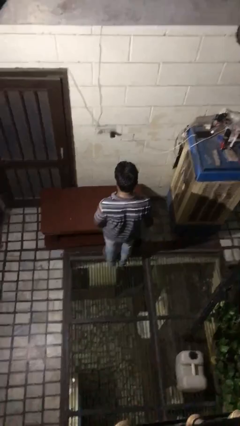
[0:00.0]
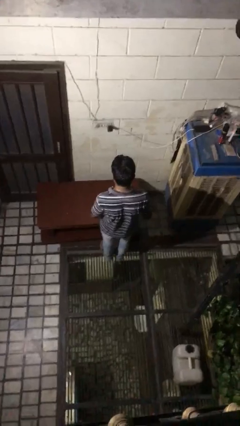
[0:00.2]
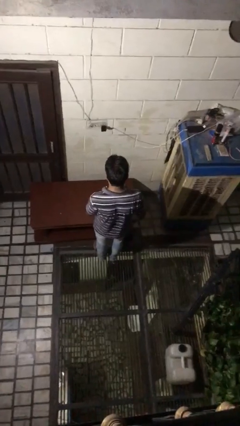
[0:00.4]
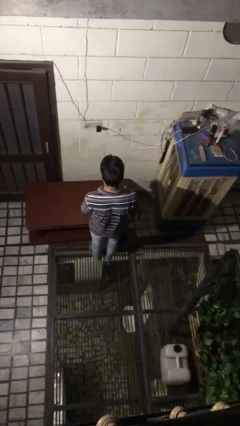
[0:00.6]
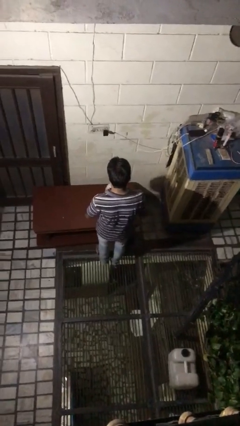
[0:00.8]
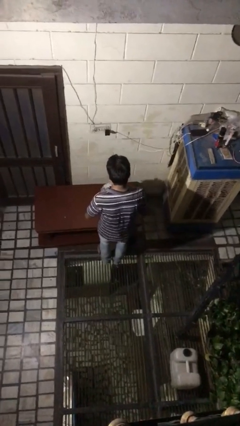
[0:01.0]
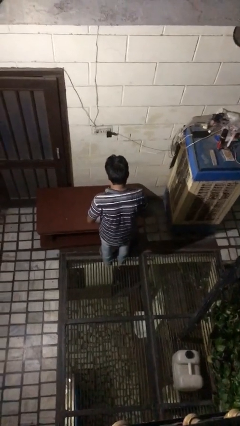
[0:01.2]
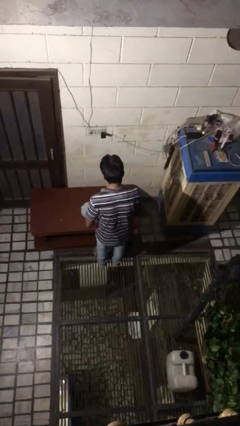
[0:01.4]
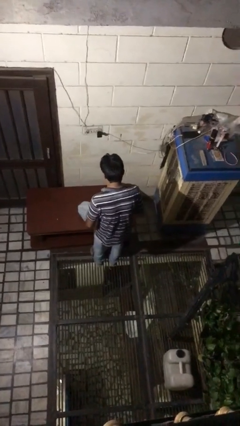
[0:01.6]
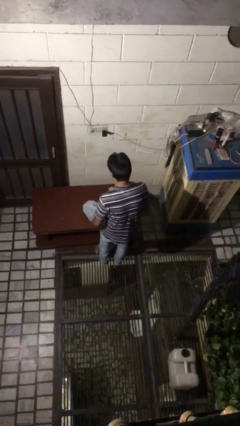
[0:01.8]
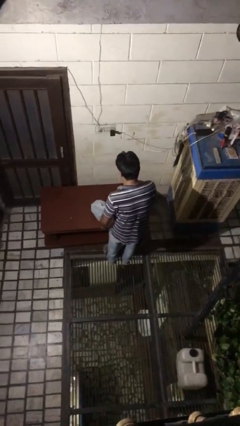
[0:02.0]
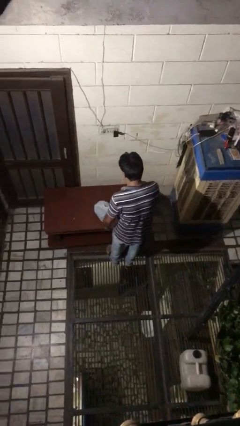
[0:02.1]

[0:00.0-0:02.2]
person throws object on table

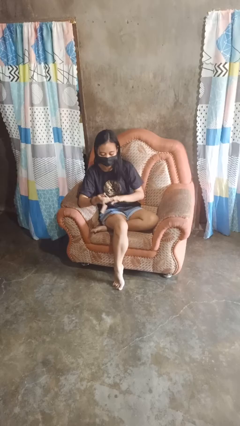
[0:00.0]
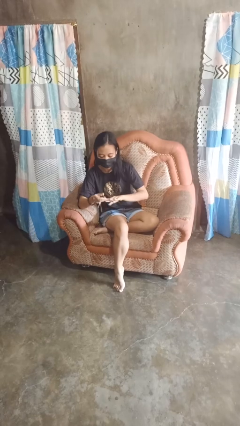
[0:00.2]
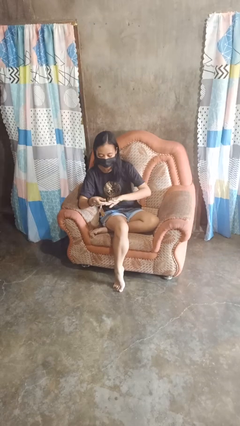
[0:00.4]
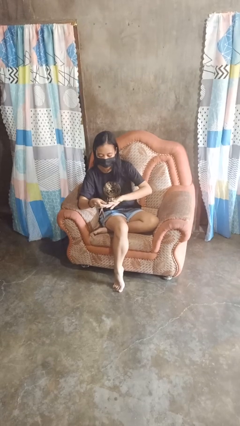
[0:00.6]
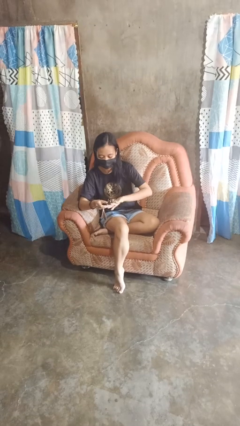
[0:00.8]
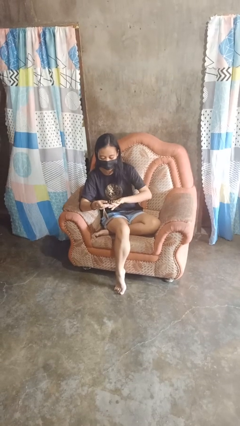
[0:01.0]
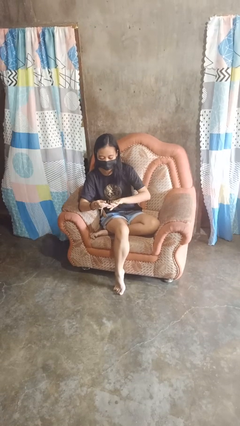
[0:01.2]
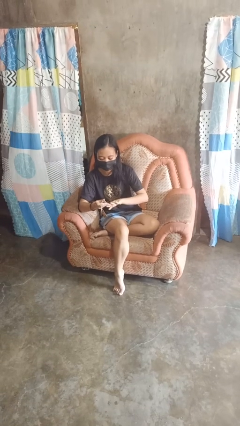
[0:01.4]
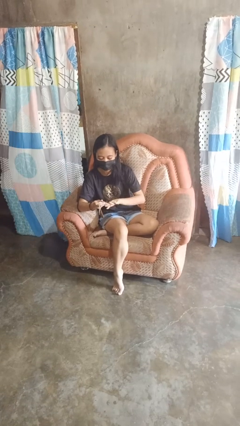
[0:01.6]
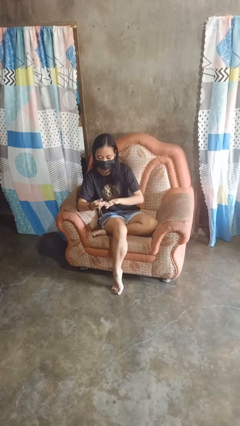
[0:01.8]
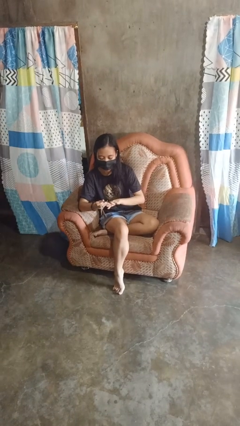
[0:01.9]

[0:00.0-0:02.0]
person clips fingernails

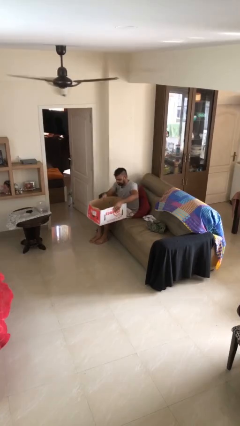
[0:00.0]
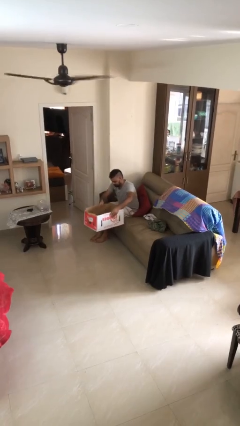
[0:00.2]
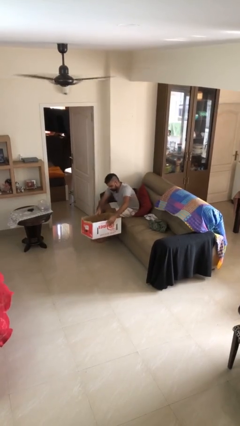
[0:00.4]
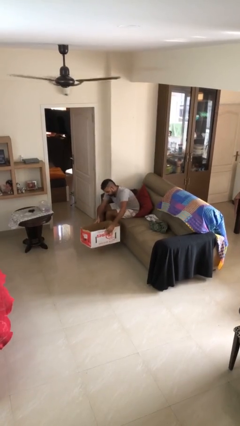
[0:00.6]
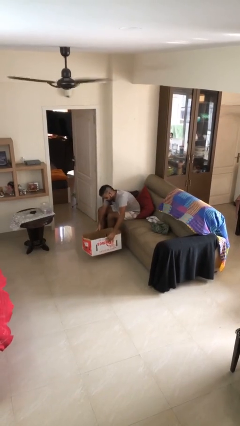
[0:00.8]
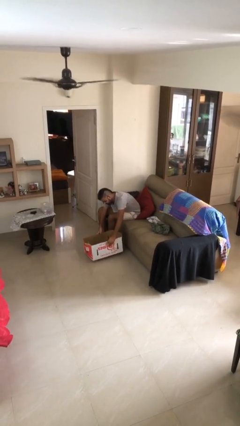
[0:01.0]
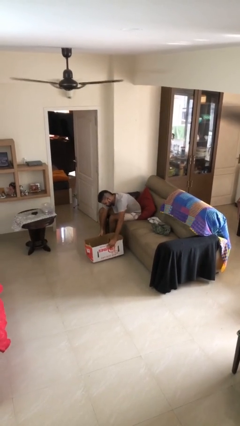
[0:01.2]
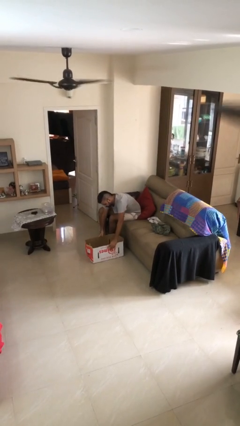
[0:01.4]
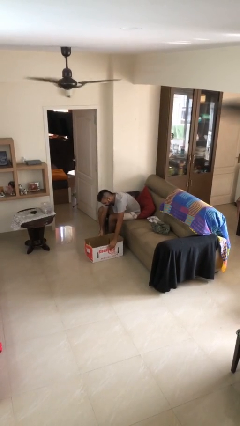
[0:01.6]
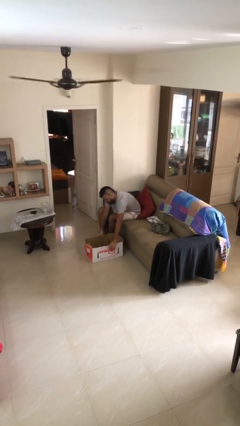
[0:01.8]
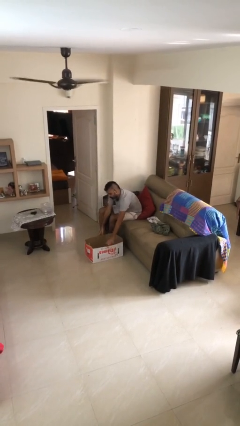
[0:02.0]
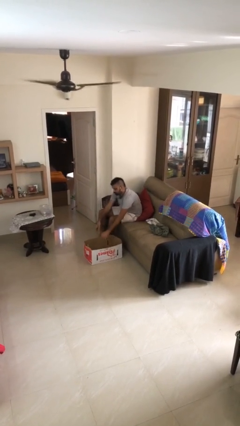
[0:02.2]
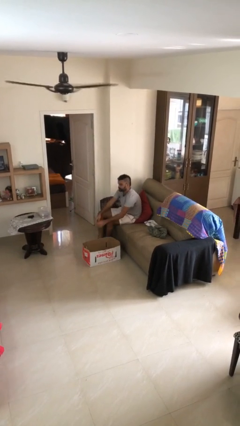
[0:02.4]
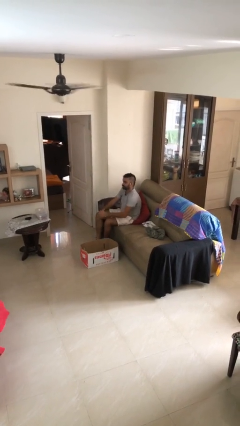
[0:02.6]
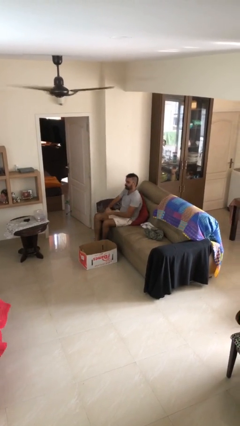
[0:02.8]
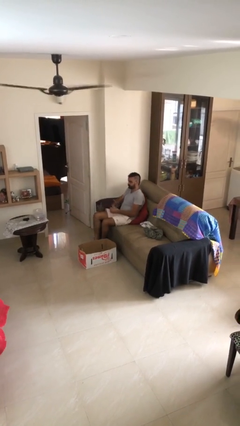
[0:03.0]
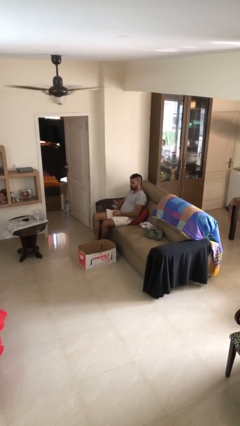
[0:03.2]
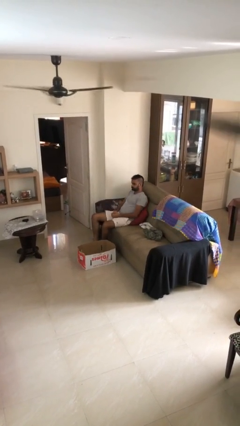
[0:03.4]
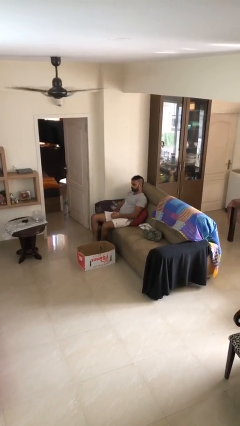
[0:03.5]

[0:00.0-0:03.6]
person puts down object on floor

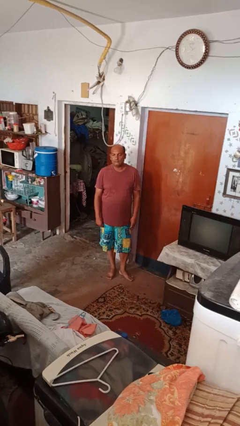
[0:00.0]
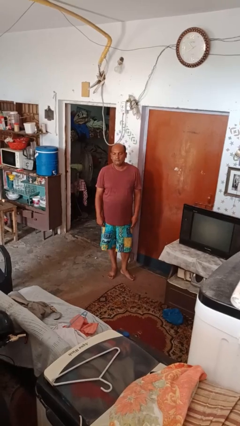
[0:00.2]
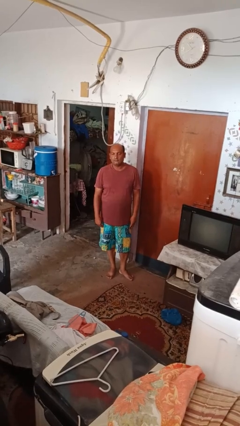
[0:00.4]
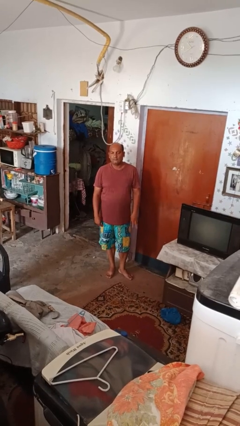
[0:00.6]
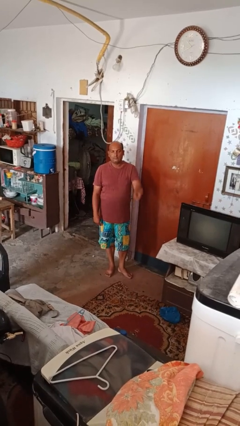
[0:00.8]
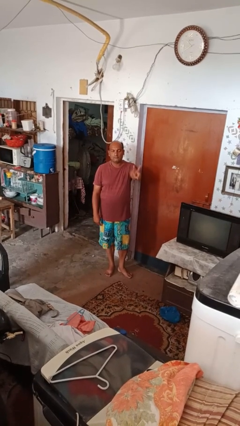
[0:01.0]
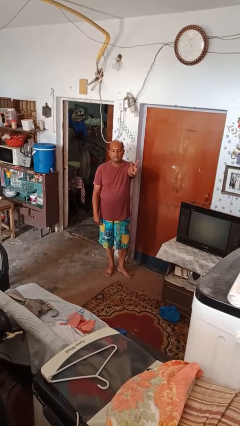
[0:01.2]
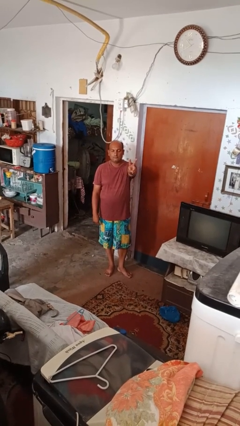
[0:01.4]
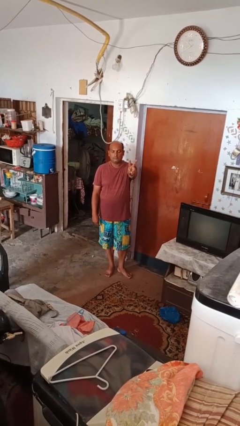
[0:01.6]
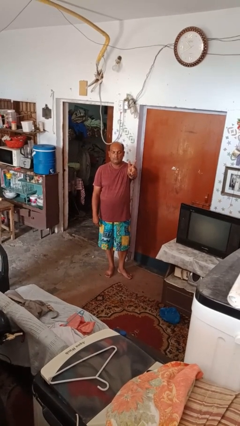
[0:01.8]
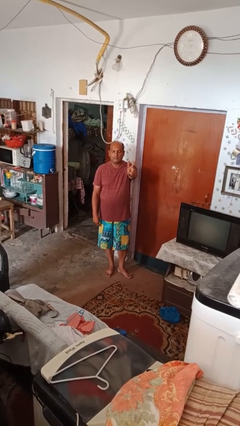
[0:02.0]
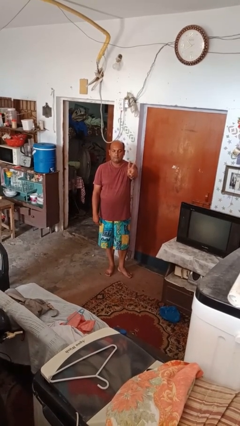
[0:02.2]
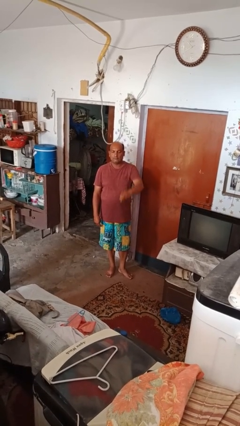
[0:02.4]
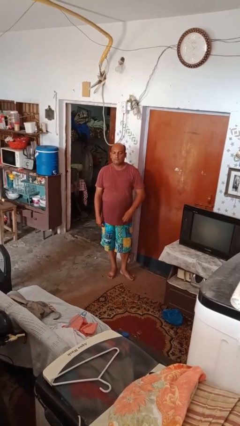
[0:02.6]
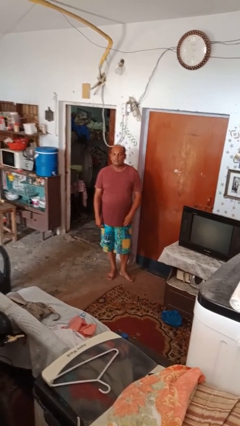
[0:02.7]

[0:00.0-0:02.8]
person gestures peace

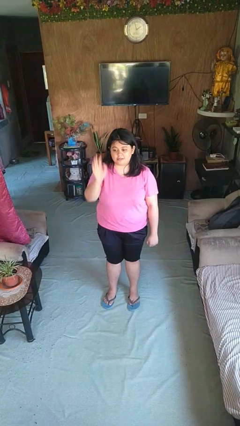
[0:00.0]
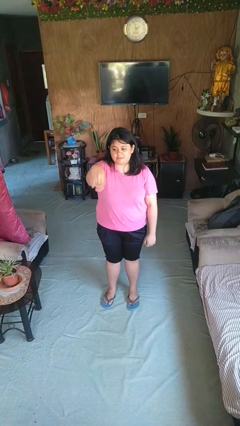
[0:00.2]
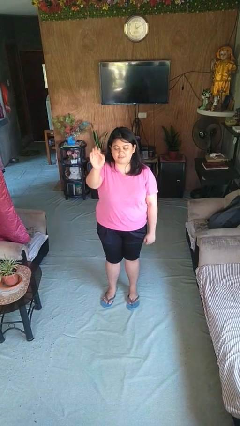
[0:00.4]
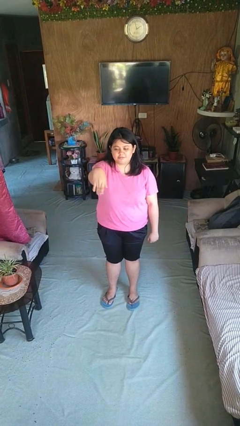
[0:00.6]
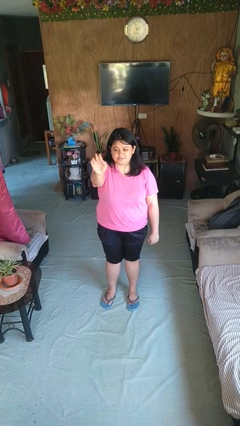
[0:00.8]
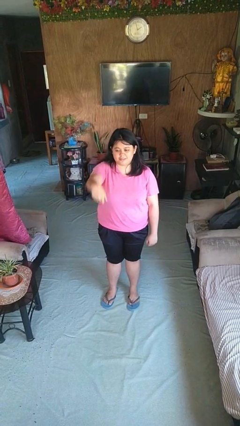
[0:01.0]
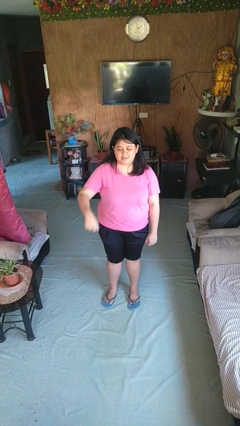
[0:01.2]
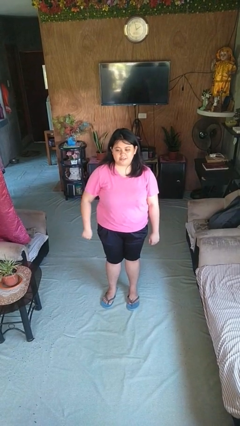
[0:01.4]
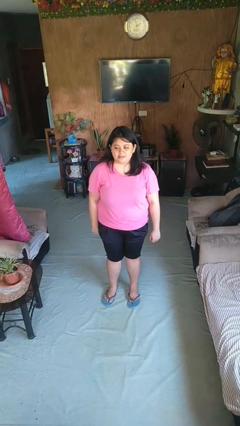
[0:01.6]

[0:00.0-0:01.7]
person gestures come here

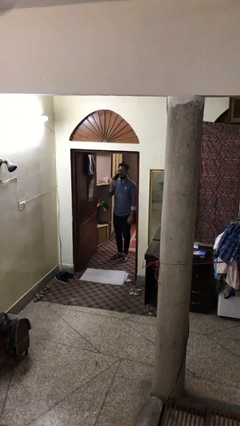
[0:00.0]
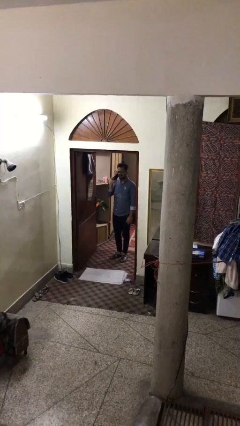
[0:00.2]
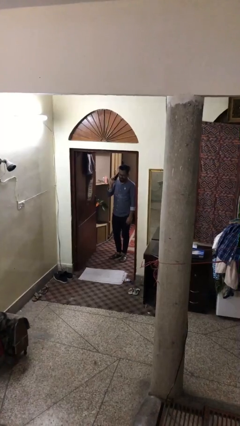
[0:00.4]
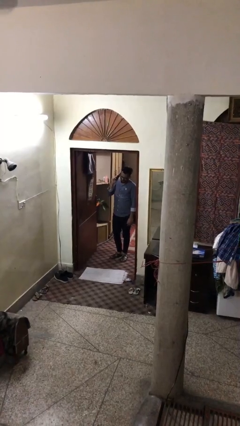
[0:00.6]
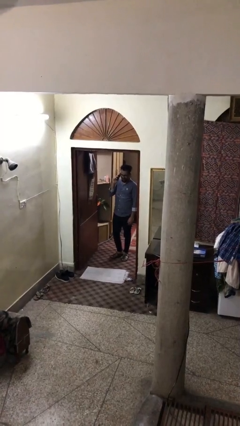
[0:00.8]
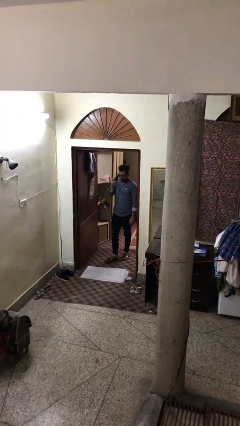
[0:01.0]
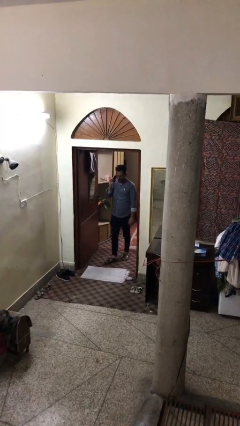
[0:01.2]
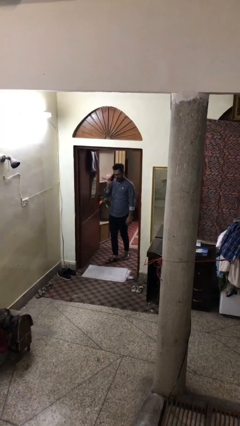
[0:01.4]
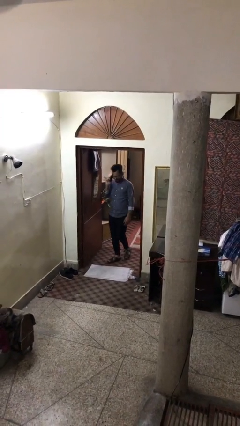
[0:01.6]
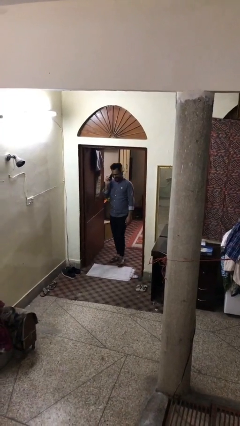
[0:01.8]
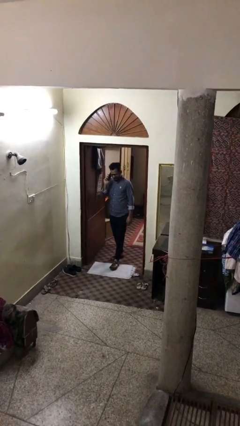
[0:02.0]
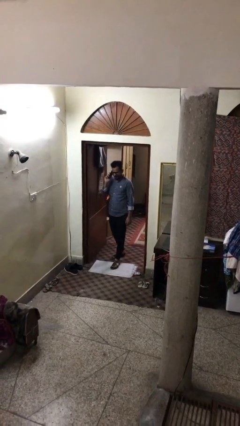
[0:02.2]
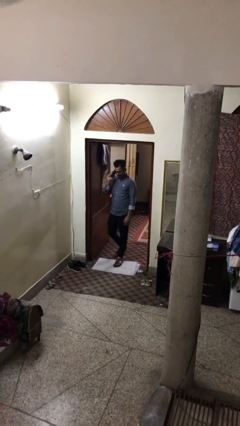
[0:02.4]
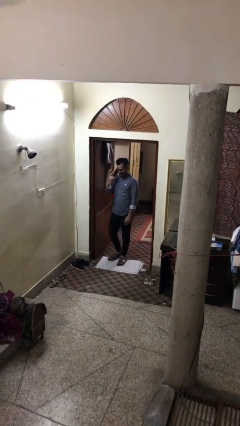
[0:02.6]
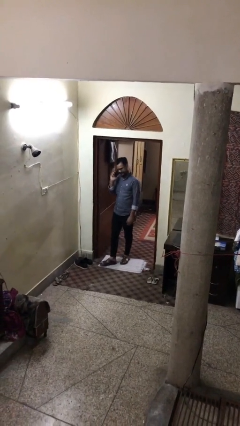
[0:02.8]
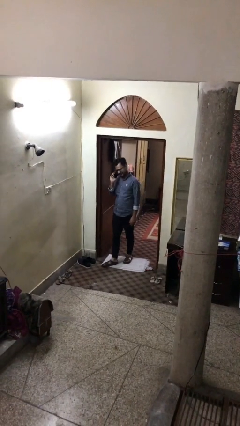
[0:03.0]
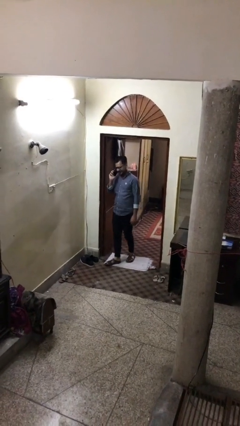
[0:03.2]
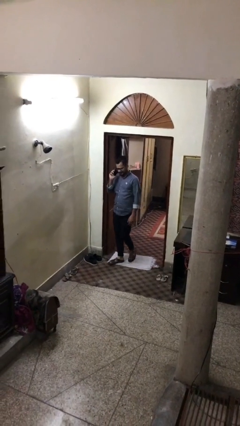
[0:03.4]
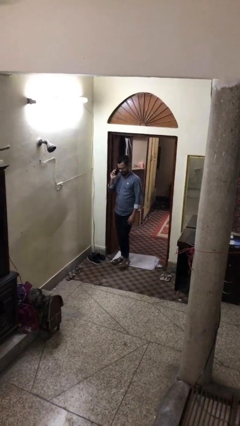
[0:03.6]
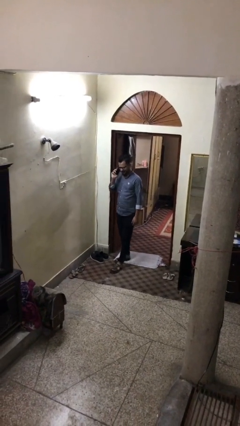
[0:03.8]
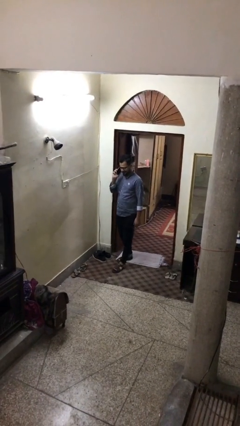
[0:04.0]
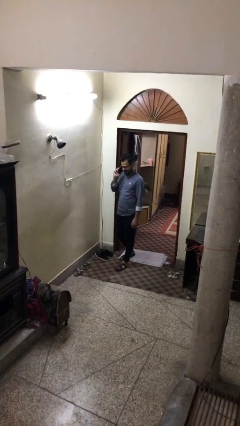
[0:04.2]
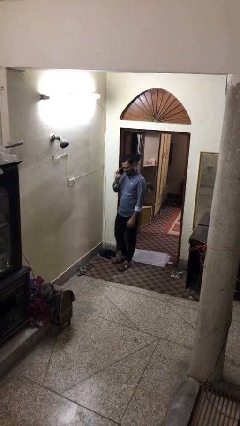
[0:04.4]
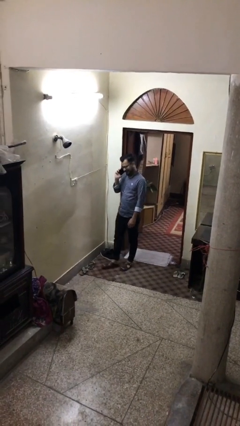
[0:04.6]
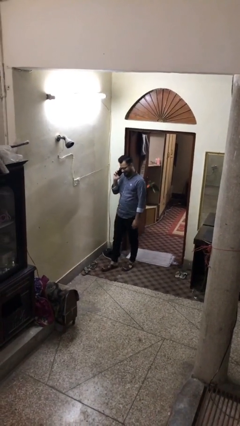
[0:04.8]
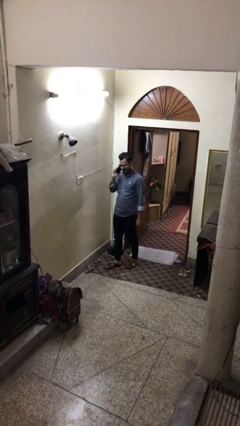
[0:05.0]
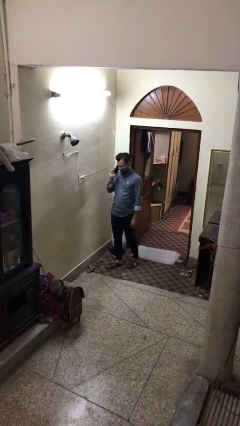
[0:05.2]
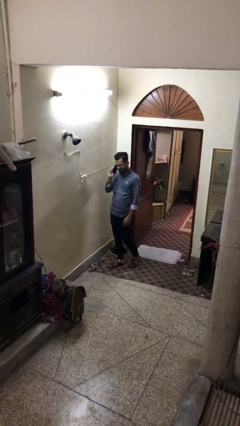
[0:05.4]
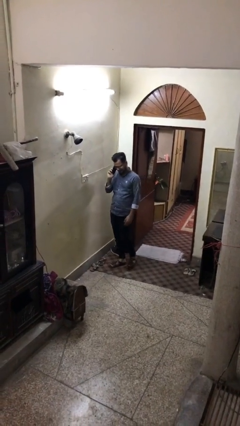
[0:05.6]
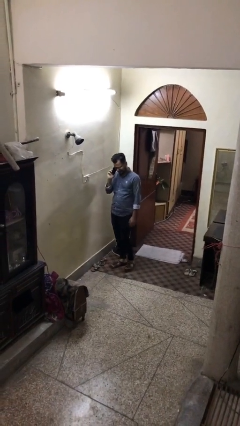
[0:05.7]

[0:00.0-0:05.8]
person enters scene through structure
